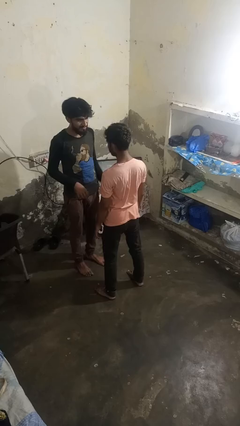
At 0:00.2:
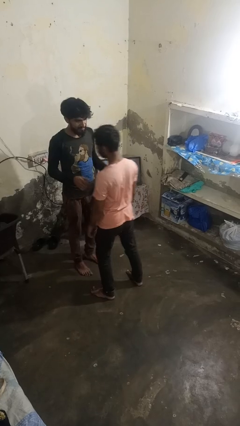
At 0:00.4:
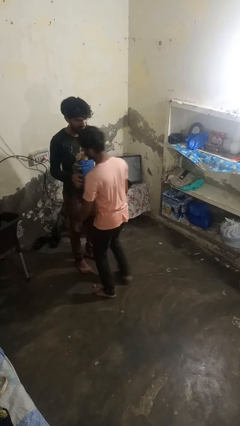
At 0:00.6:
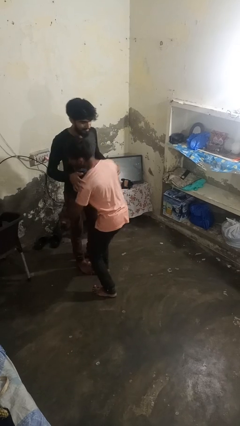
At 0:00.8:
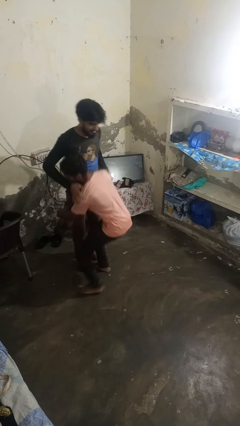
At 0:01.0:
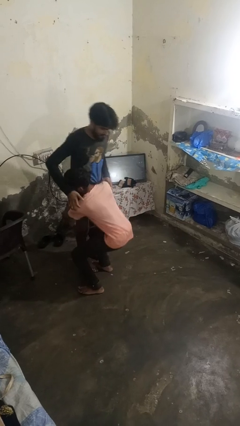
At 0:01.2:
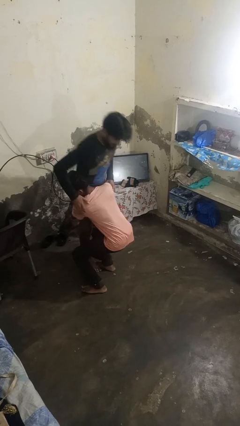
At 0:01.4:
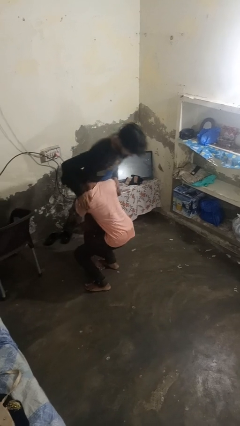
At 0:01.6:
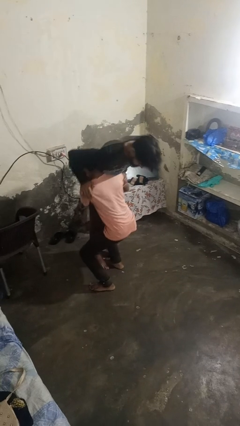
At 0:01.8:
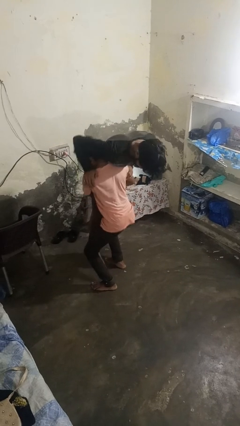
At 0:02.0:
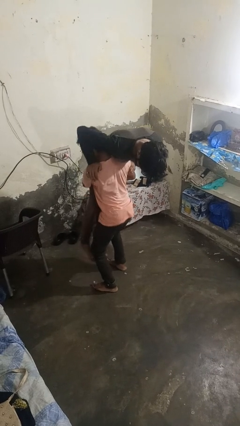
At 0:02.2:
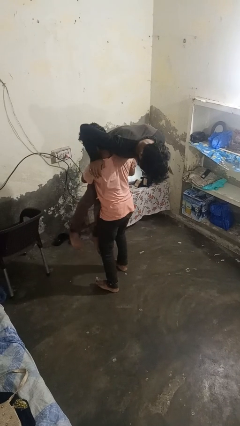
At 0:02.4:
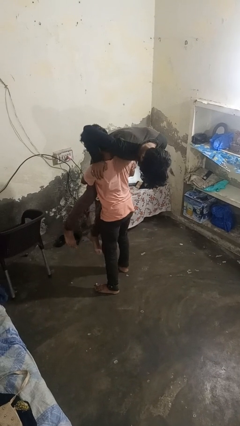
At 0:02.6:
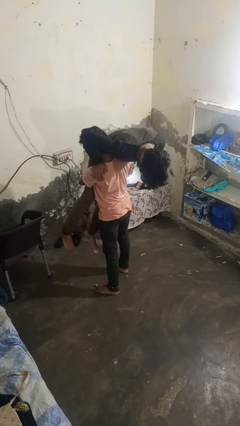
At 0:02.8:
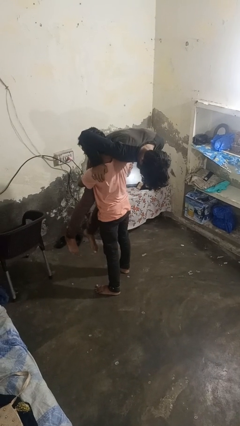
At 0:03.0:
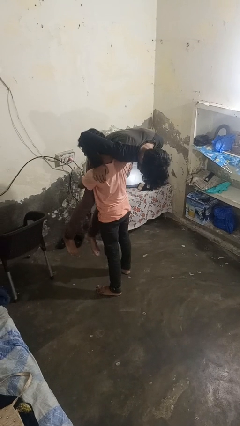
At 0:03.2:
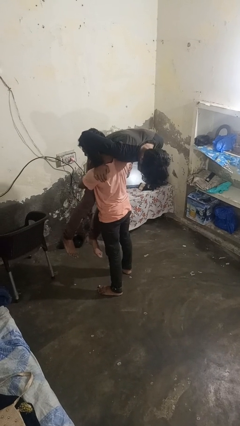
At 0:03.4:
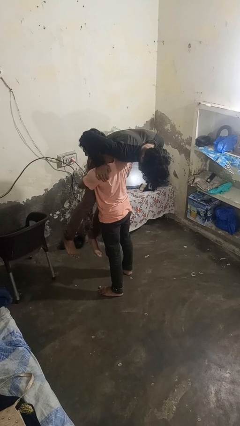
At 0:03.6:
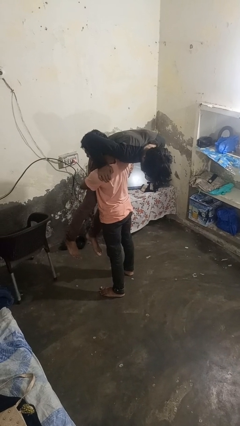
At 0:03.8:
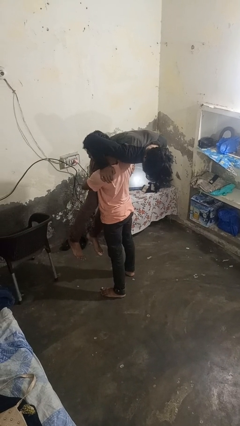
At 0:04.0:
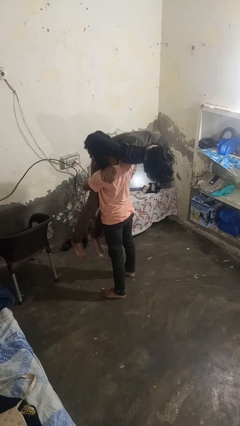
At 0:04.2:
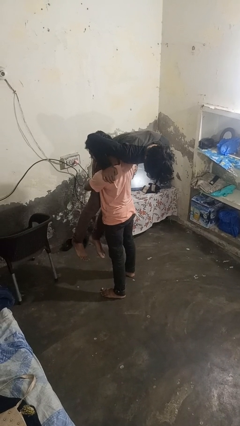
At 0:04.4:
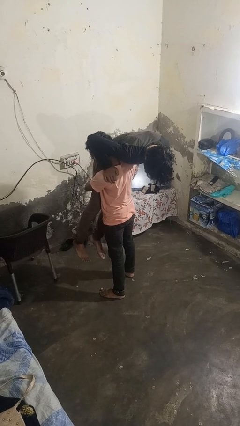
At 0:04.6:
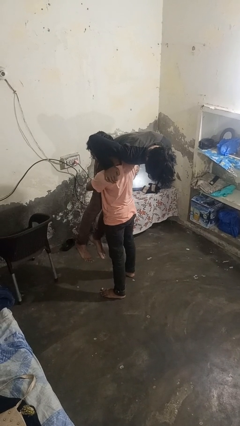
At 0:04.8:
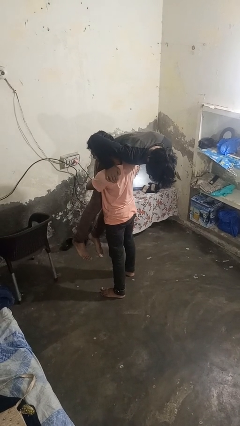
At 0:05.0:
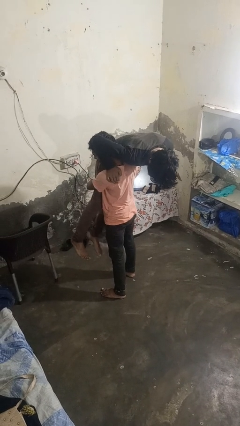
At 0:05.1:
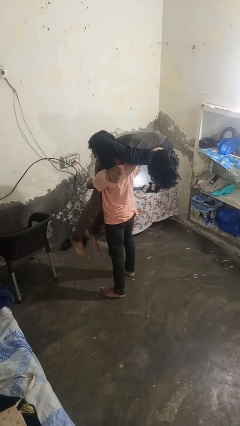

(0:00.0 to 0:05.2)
person carries person over shoulder

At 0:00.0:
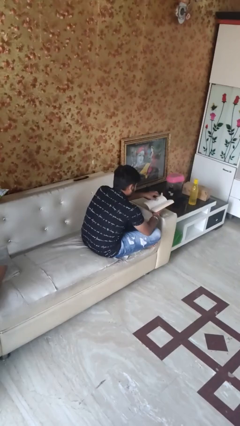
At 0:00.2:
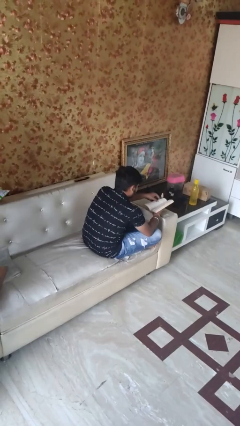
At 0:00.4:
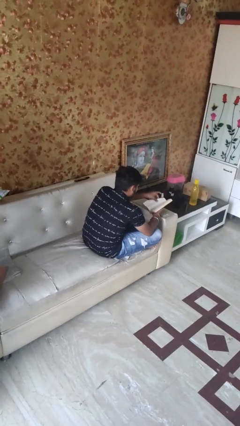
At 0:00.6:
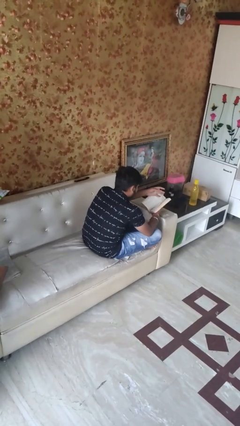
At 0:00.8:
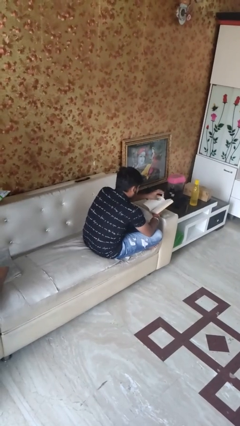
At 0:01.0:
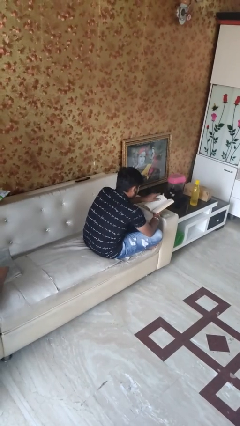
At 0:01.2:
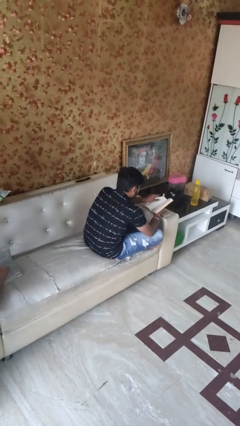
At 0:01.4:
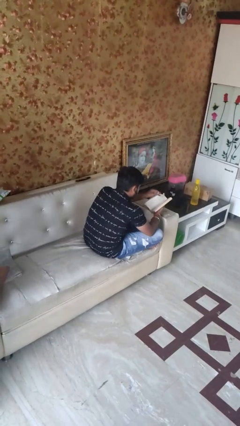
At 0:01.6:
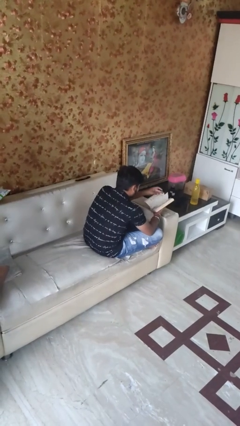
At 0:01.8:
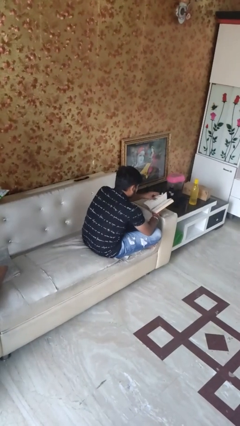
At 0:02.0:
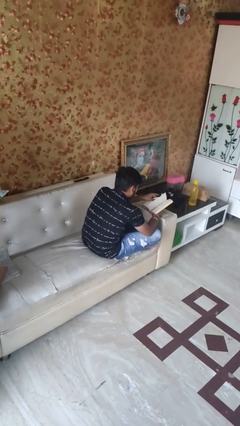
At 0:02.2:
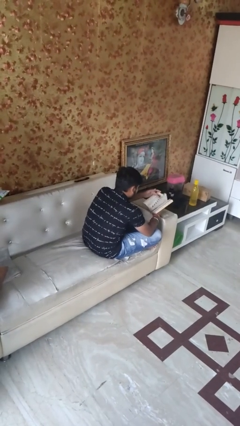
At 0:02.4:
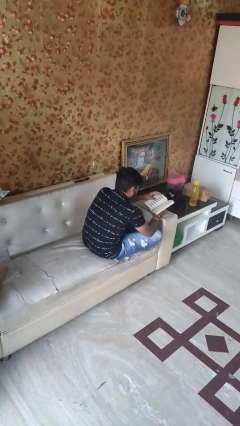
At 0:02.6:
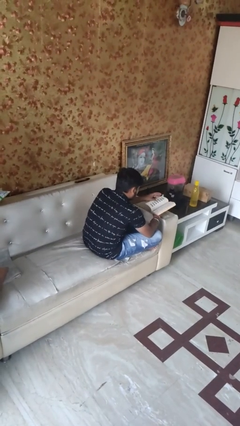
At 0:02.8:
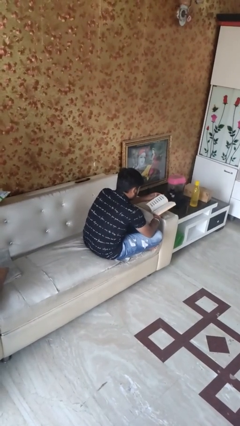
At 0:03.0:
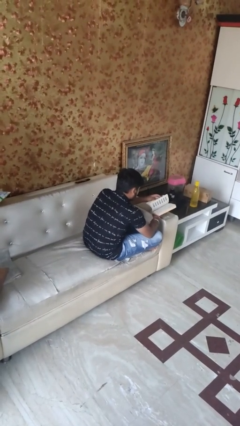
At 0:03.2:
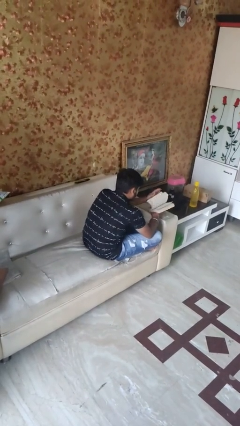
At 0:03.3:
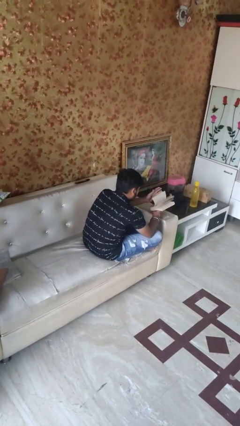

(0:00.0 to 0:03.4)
person reads book

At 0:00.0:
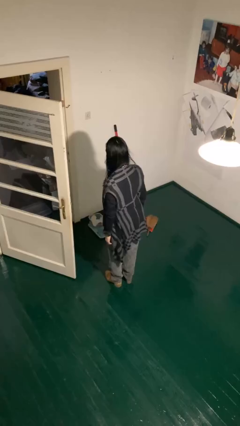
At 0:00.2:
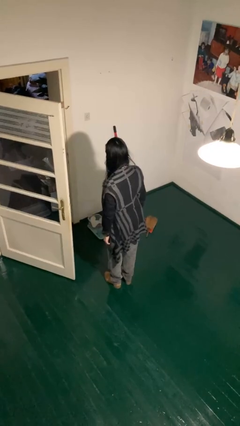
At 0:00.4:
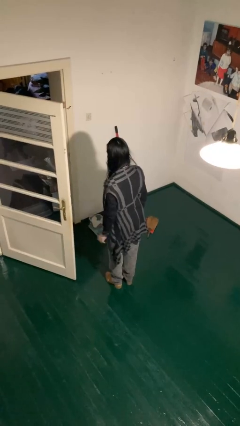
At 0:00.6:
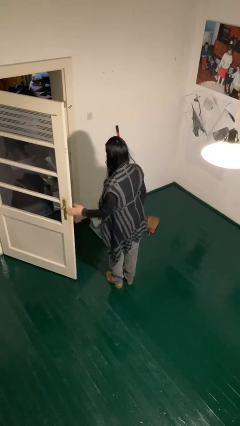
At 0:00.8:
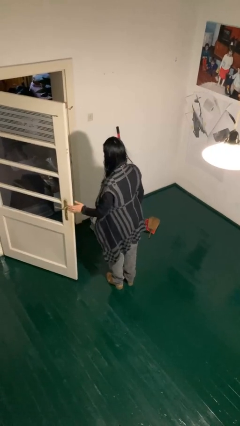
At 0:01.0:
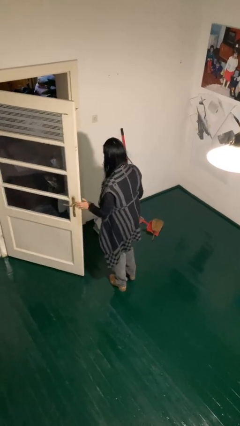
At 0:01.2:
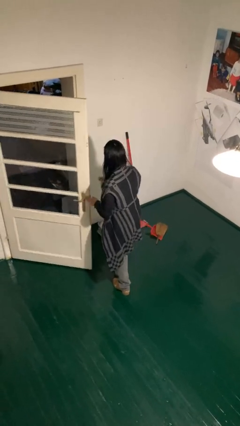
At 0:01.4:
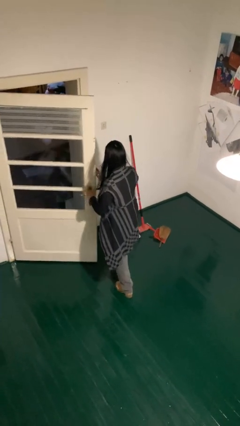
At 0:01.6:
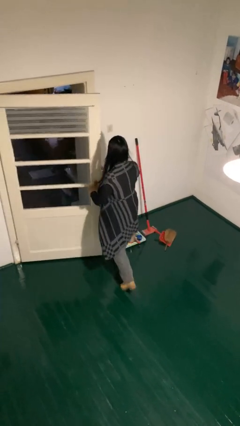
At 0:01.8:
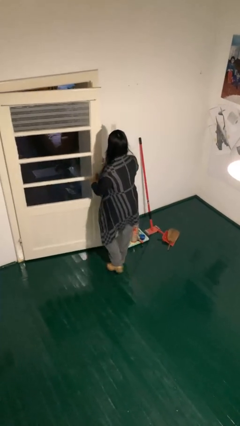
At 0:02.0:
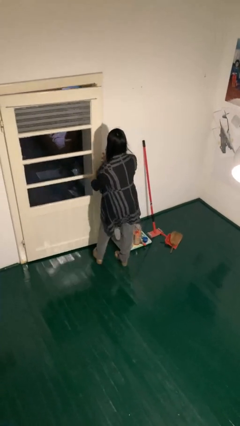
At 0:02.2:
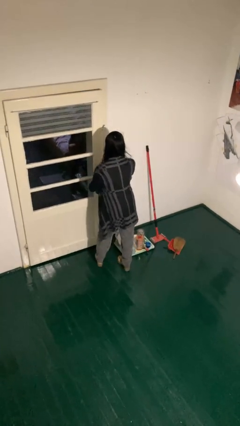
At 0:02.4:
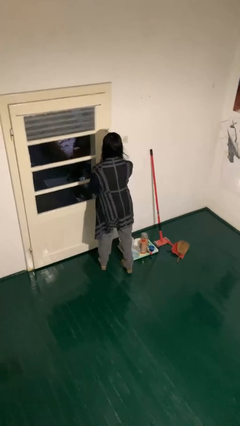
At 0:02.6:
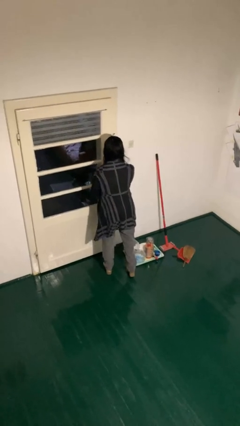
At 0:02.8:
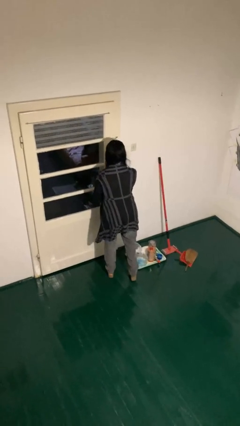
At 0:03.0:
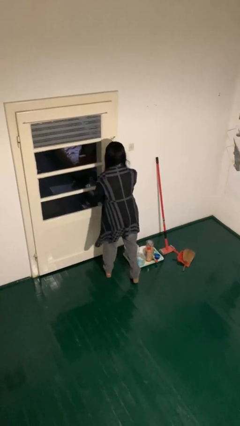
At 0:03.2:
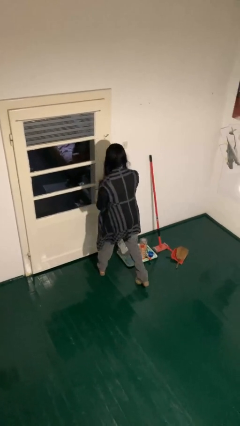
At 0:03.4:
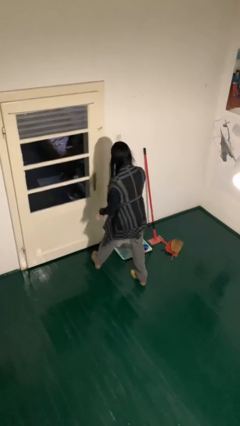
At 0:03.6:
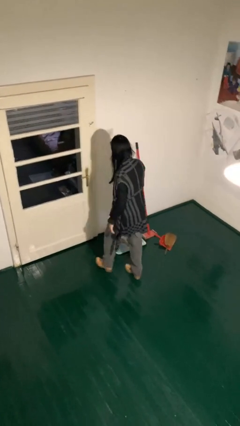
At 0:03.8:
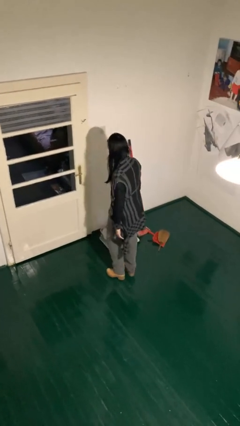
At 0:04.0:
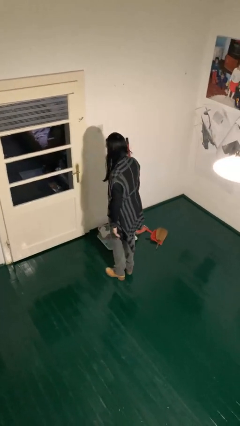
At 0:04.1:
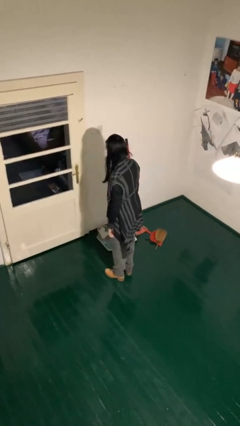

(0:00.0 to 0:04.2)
person closes facility door

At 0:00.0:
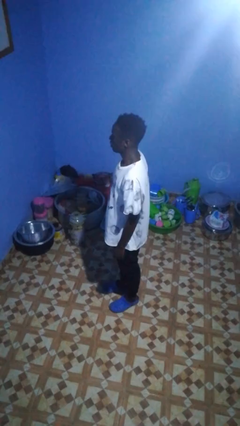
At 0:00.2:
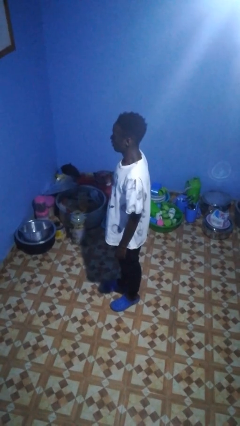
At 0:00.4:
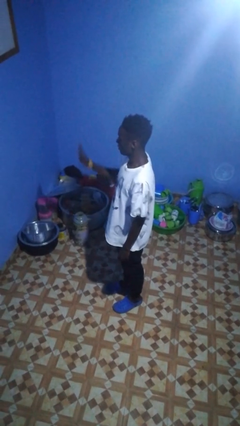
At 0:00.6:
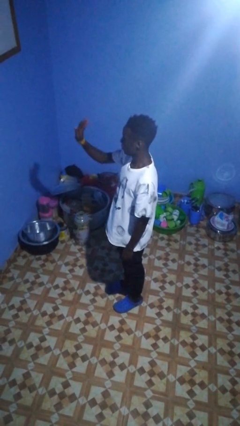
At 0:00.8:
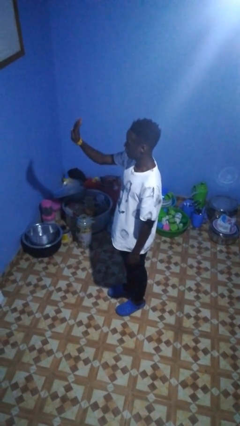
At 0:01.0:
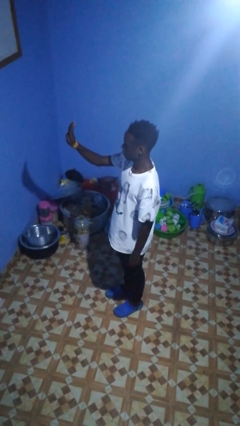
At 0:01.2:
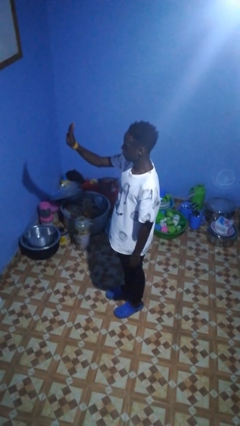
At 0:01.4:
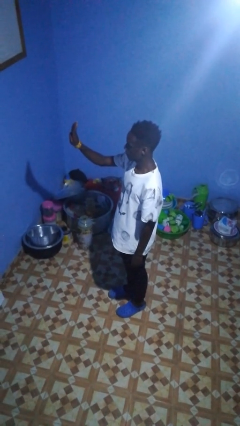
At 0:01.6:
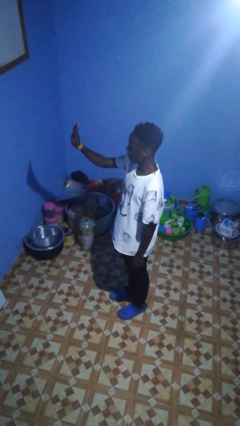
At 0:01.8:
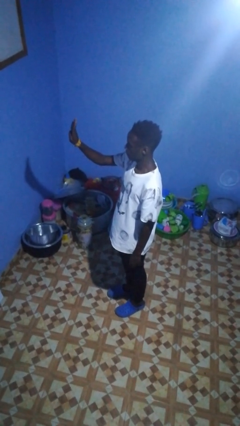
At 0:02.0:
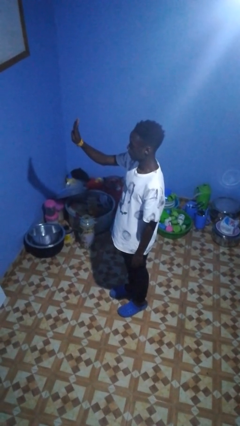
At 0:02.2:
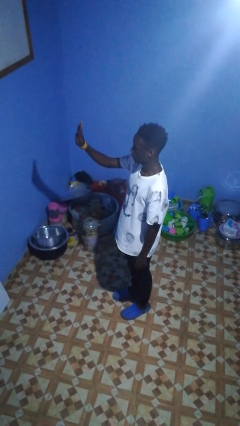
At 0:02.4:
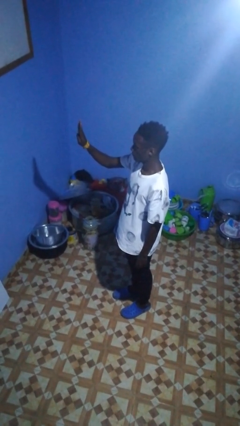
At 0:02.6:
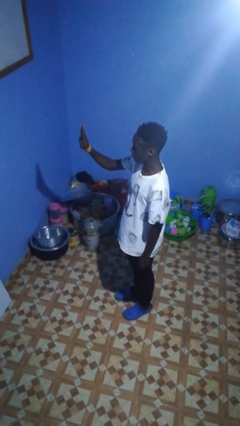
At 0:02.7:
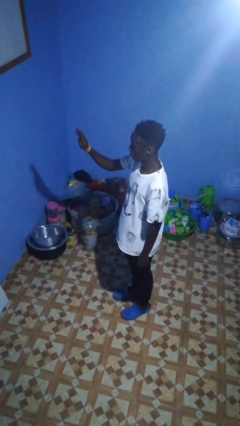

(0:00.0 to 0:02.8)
person gestures number four

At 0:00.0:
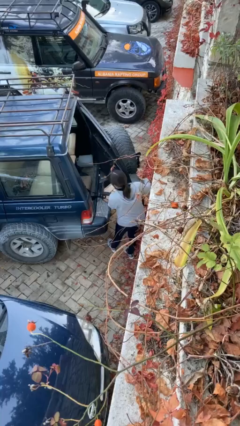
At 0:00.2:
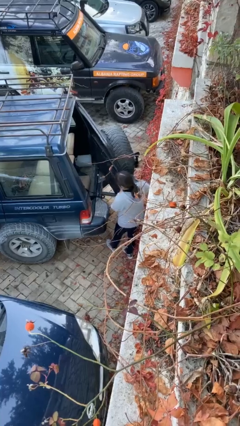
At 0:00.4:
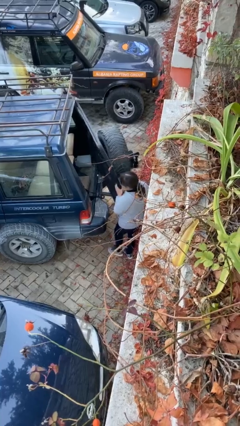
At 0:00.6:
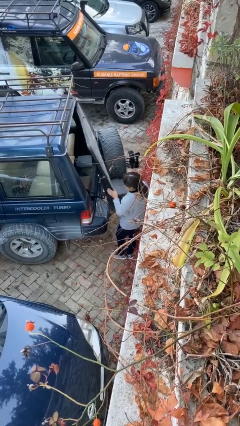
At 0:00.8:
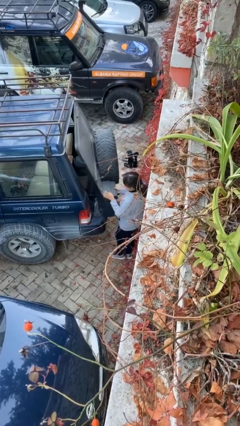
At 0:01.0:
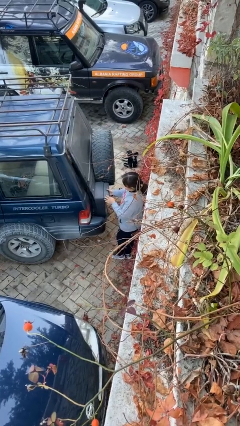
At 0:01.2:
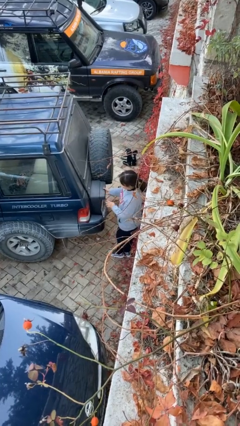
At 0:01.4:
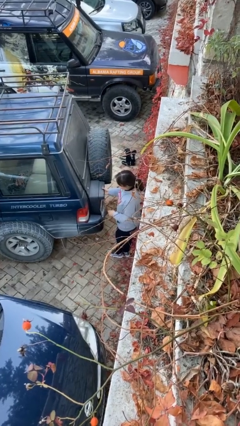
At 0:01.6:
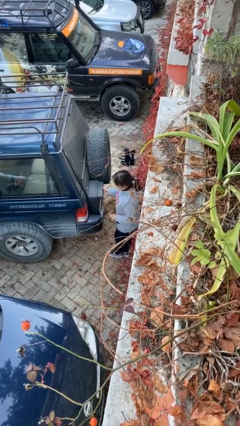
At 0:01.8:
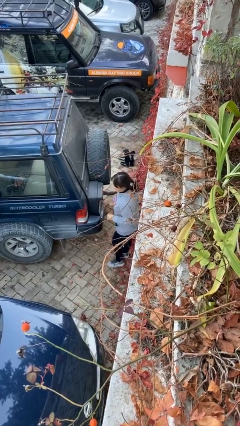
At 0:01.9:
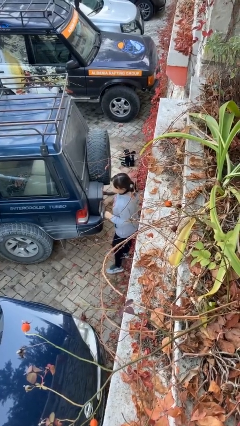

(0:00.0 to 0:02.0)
person closes car trunk
